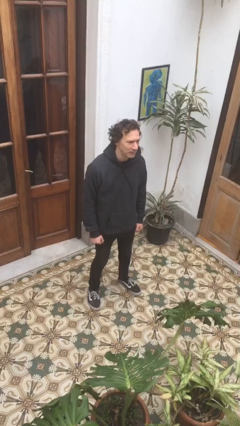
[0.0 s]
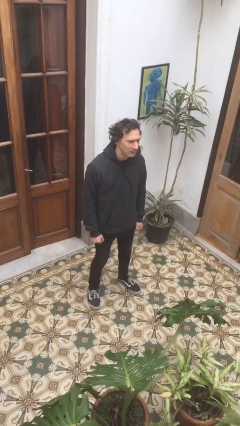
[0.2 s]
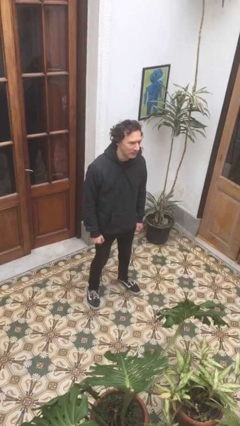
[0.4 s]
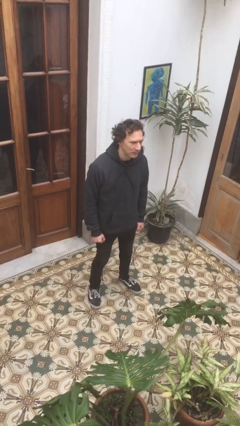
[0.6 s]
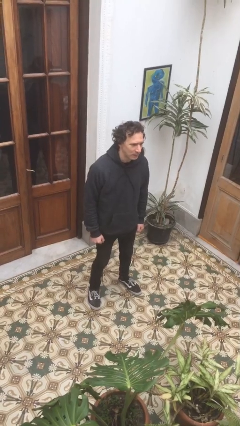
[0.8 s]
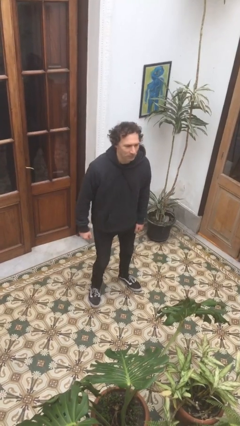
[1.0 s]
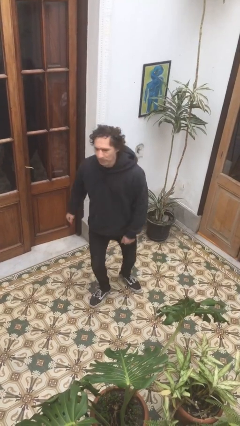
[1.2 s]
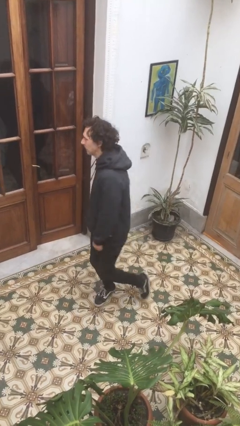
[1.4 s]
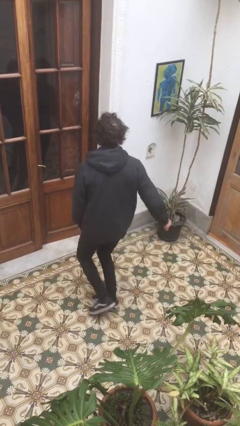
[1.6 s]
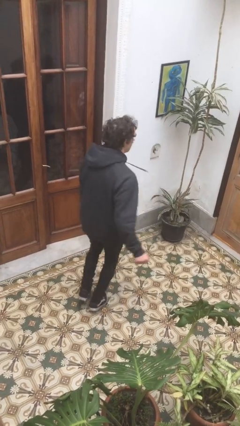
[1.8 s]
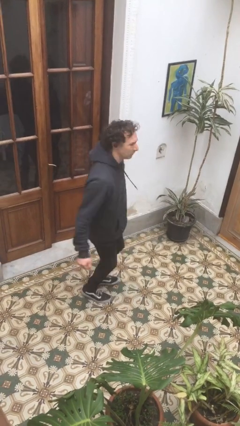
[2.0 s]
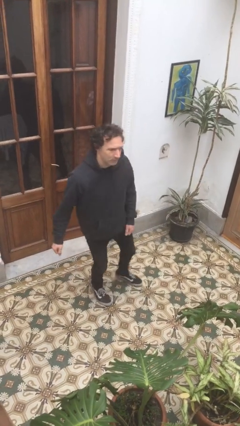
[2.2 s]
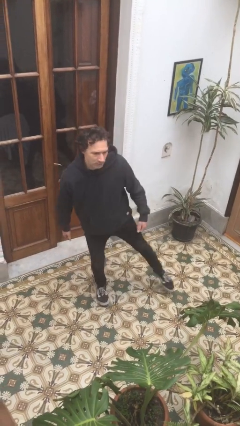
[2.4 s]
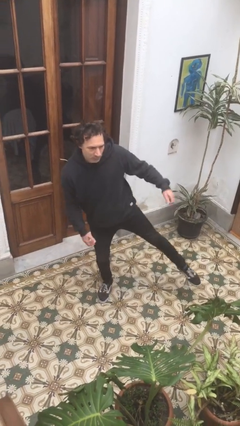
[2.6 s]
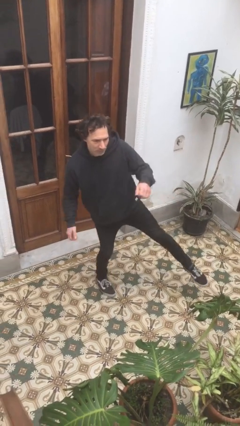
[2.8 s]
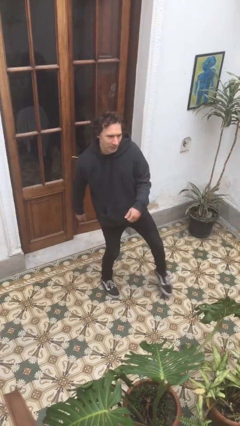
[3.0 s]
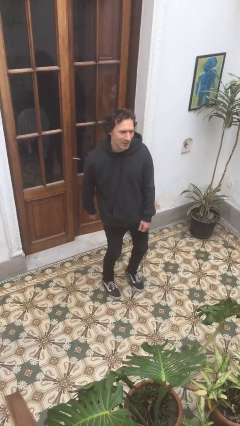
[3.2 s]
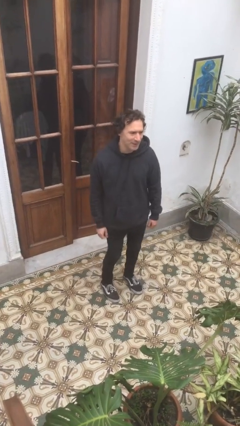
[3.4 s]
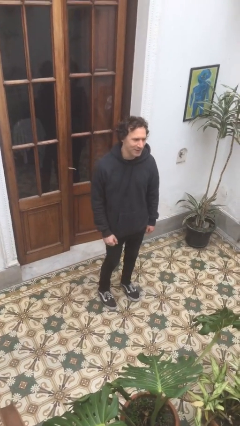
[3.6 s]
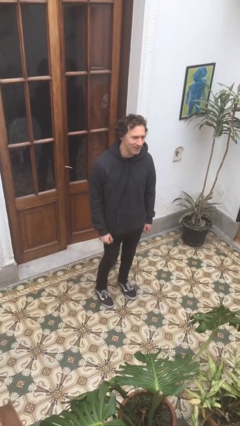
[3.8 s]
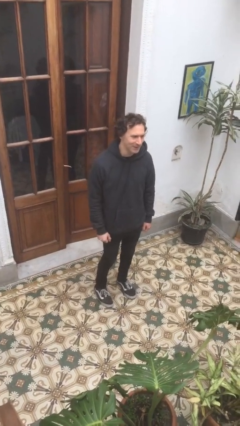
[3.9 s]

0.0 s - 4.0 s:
person twirls

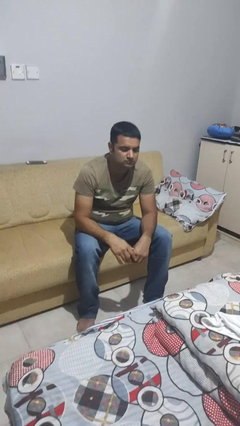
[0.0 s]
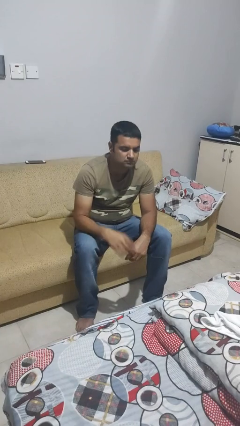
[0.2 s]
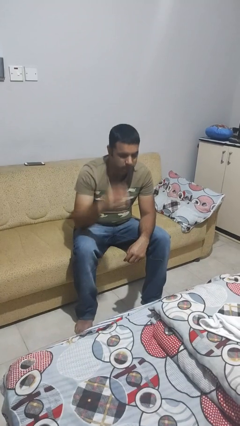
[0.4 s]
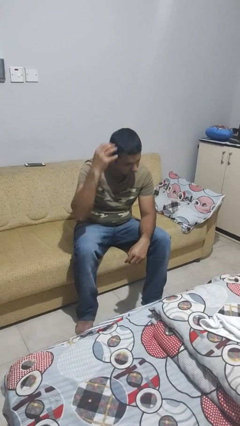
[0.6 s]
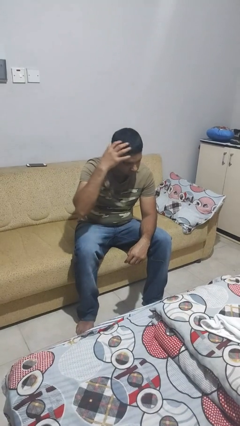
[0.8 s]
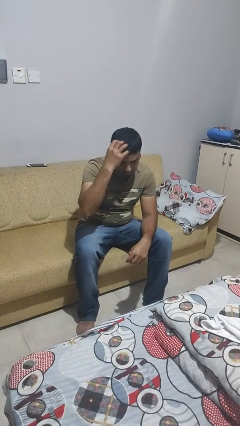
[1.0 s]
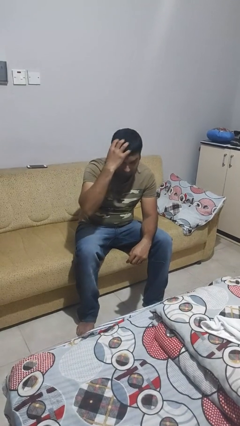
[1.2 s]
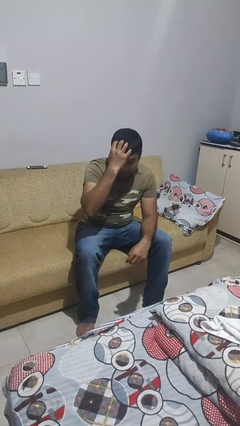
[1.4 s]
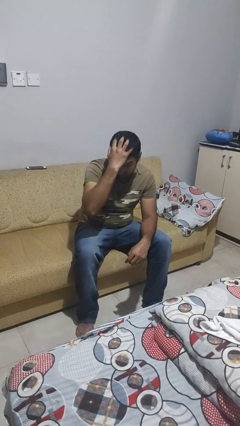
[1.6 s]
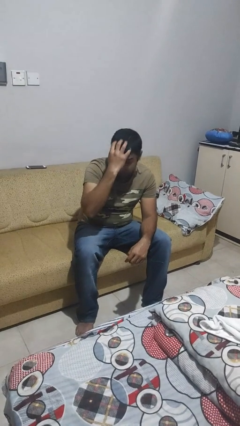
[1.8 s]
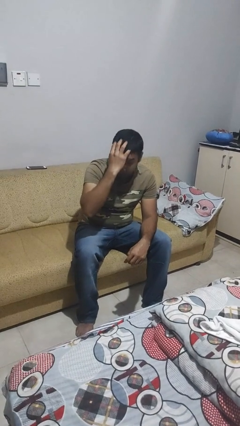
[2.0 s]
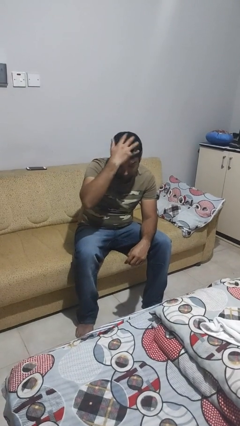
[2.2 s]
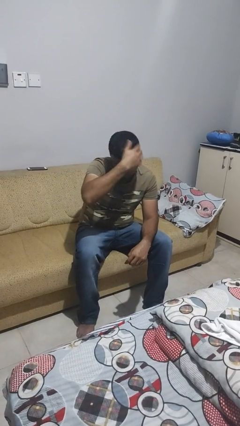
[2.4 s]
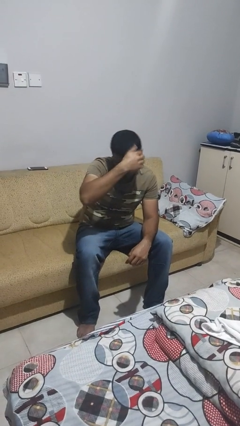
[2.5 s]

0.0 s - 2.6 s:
person strokes hair

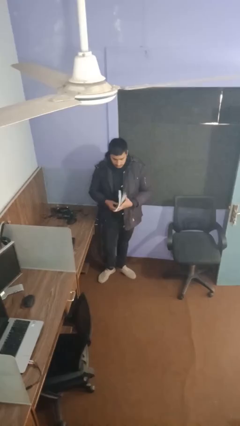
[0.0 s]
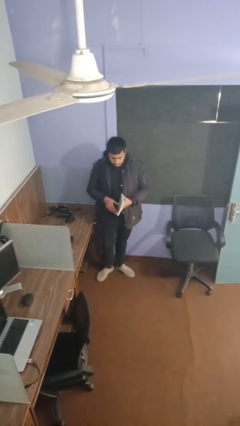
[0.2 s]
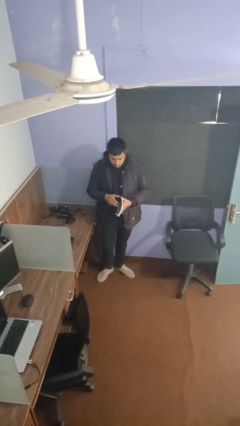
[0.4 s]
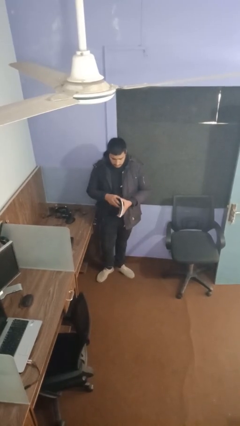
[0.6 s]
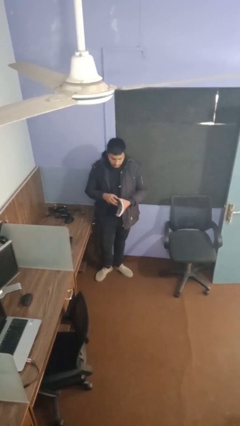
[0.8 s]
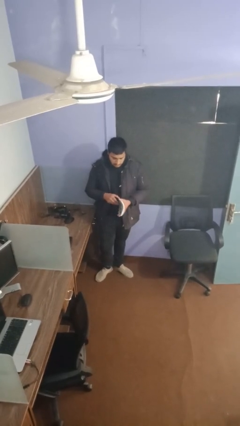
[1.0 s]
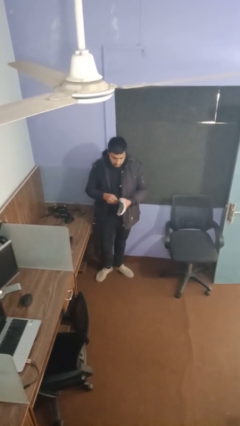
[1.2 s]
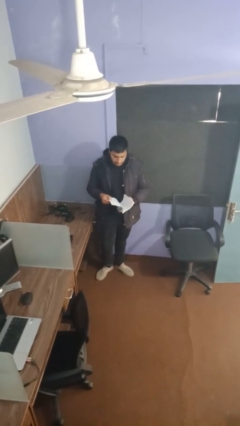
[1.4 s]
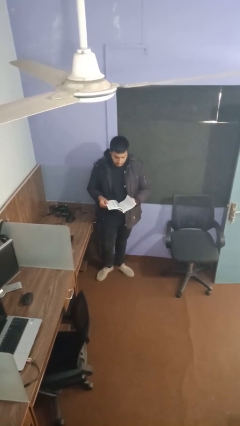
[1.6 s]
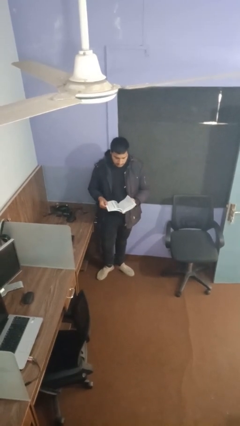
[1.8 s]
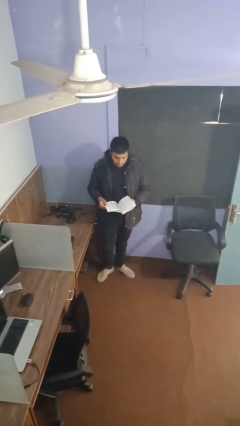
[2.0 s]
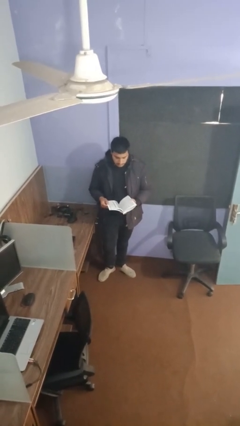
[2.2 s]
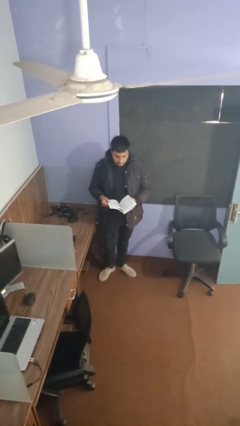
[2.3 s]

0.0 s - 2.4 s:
person reads document

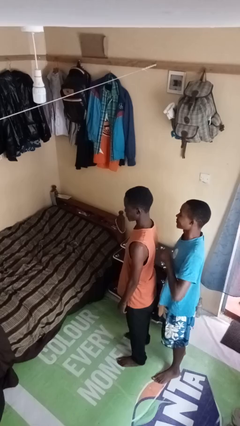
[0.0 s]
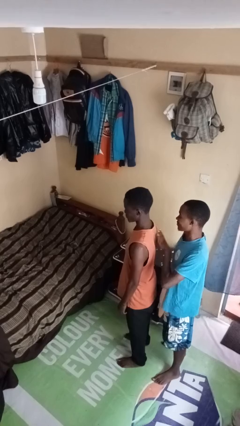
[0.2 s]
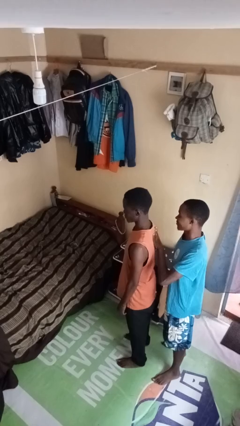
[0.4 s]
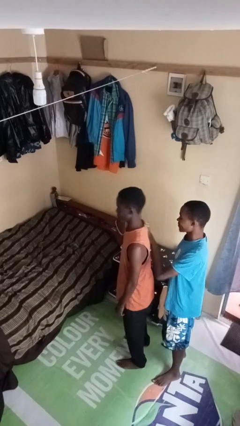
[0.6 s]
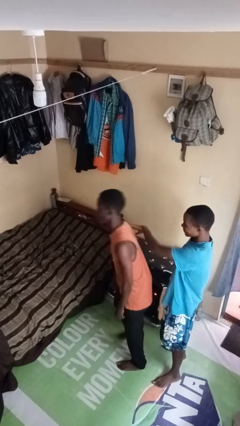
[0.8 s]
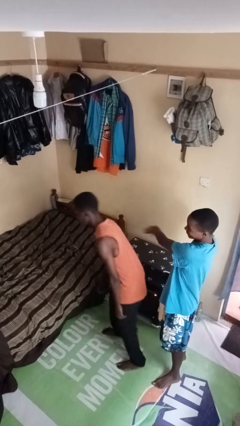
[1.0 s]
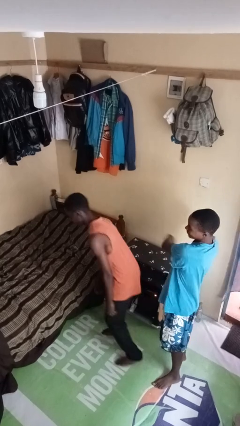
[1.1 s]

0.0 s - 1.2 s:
person shoves person

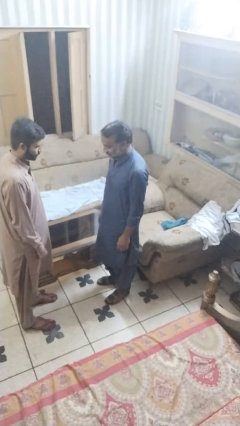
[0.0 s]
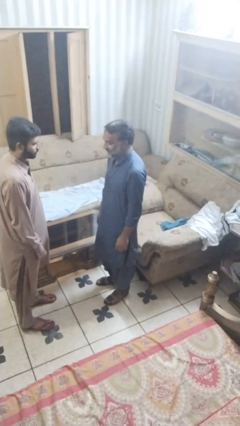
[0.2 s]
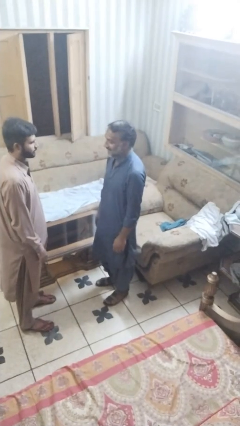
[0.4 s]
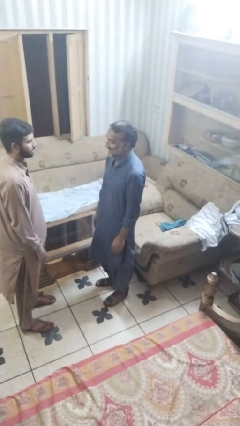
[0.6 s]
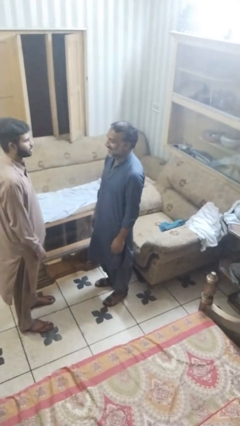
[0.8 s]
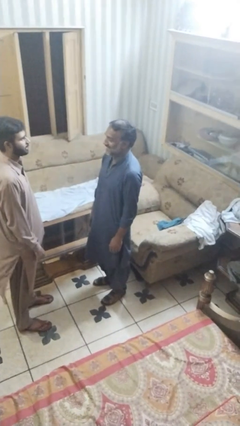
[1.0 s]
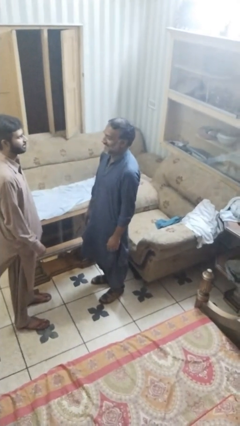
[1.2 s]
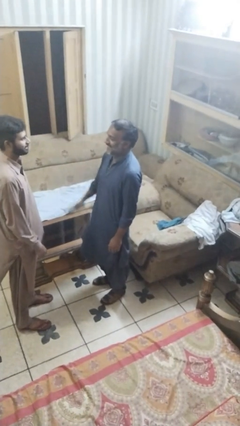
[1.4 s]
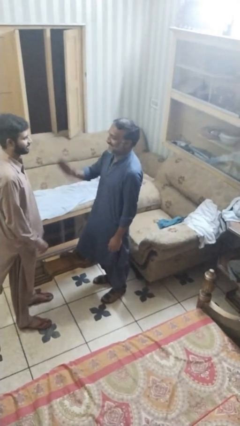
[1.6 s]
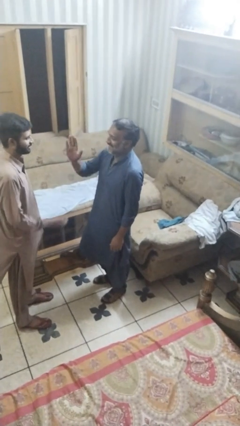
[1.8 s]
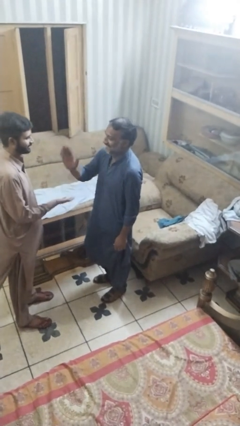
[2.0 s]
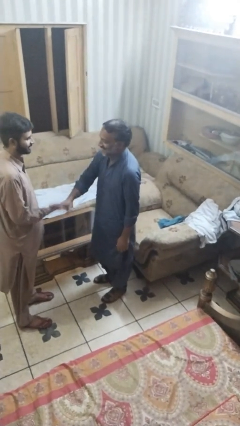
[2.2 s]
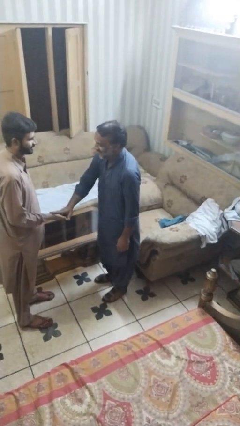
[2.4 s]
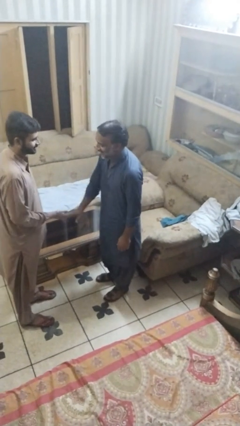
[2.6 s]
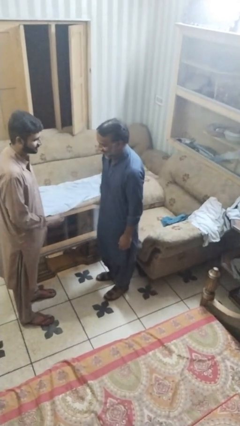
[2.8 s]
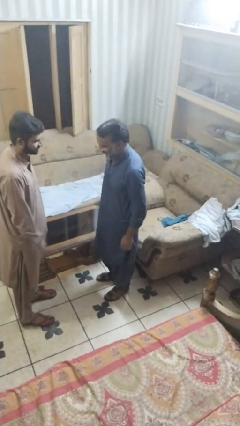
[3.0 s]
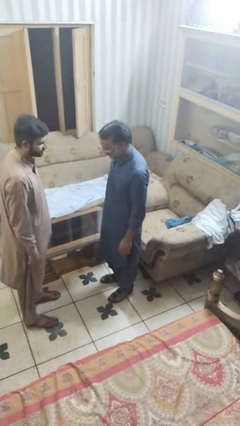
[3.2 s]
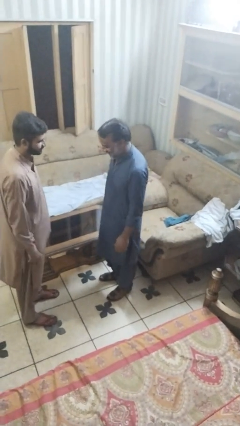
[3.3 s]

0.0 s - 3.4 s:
person laughs with person

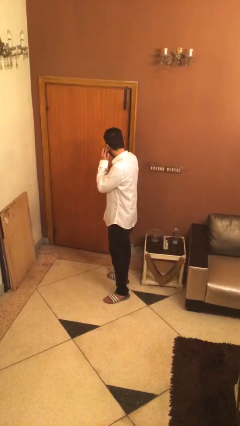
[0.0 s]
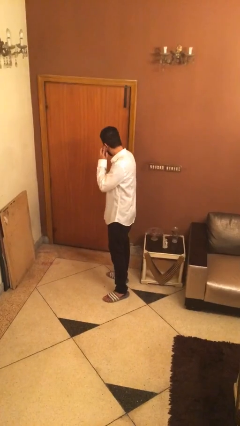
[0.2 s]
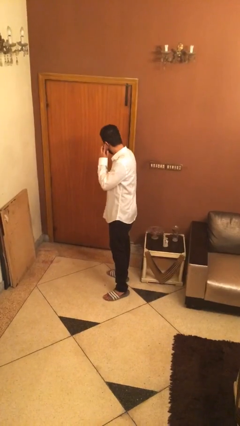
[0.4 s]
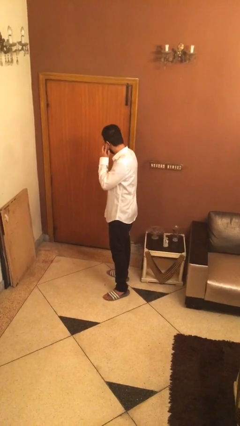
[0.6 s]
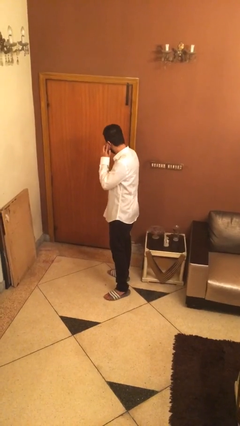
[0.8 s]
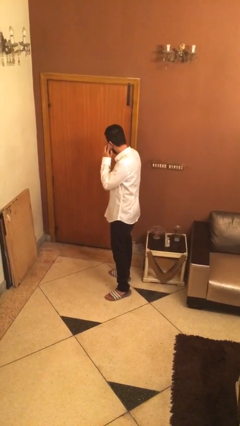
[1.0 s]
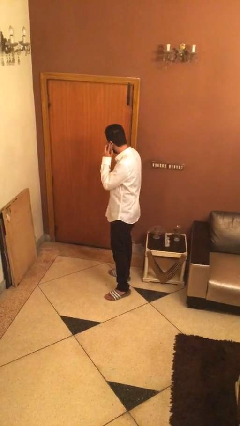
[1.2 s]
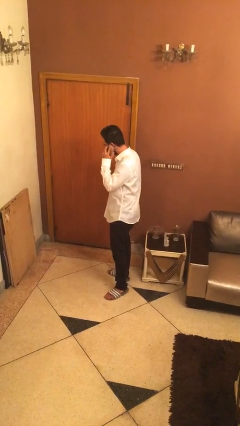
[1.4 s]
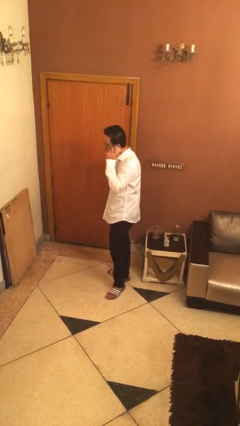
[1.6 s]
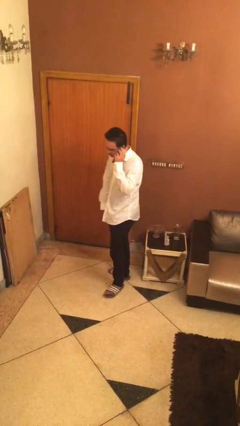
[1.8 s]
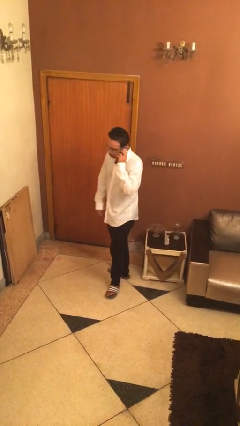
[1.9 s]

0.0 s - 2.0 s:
person closes facility door

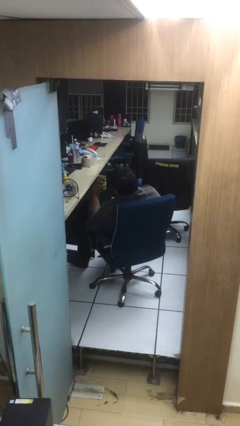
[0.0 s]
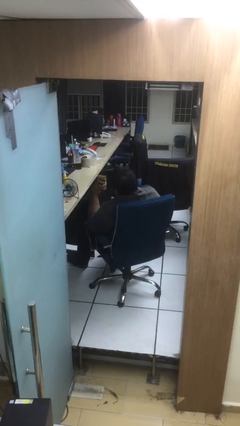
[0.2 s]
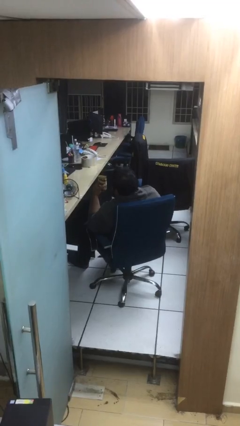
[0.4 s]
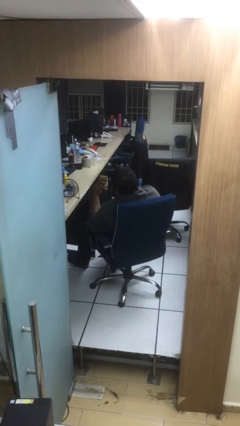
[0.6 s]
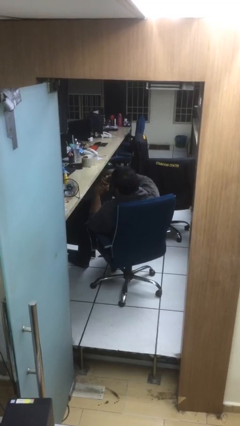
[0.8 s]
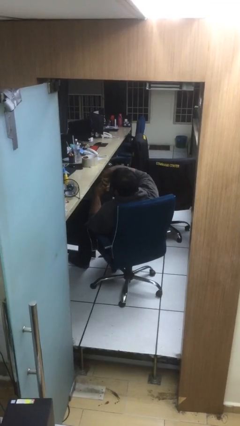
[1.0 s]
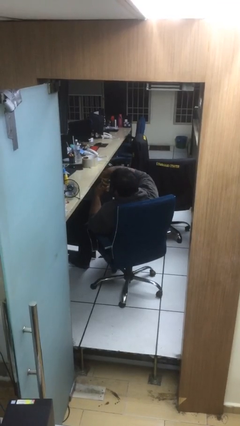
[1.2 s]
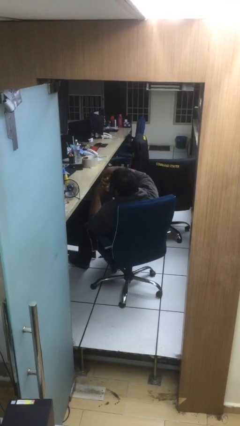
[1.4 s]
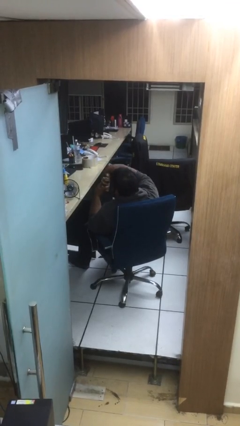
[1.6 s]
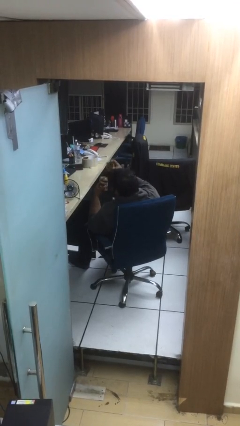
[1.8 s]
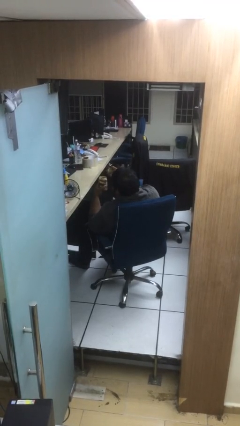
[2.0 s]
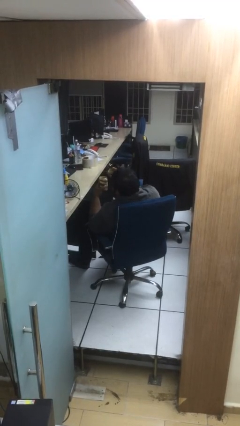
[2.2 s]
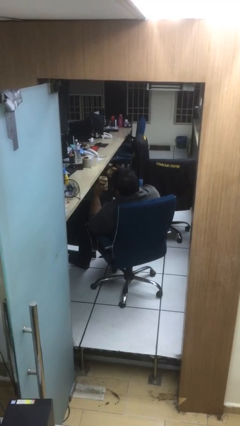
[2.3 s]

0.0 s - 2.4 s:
person opens jar
